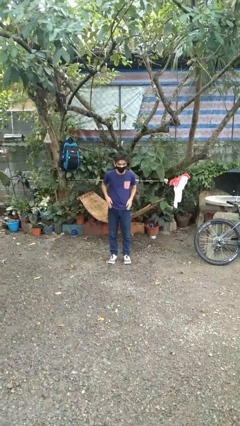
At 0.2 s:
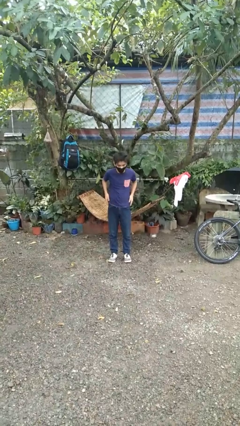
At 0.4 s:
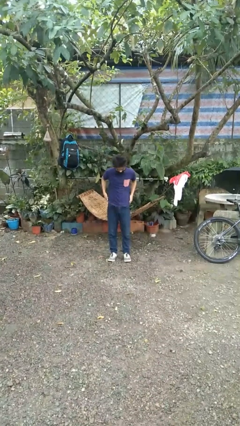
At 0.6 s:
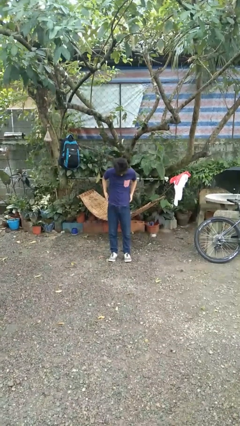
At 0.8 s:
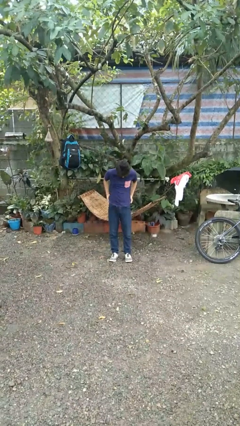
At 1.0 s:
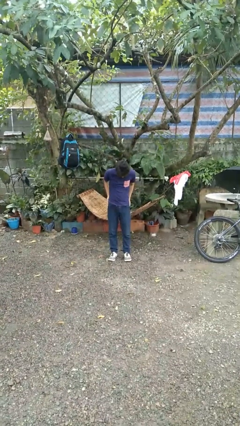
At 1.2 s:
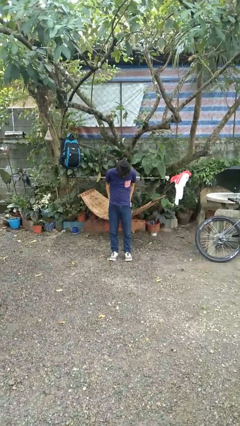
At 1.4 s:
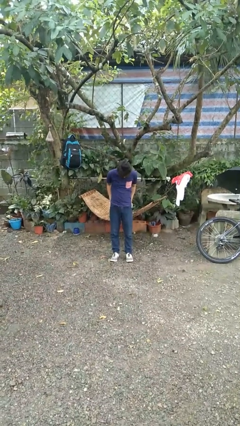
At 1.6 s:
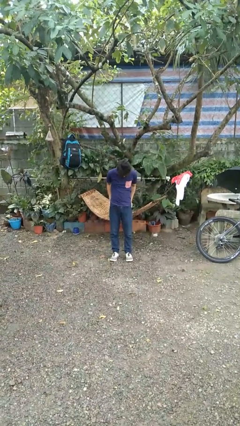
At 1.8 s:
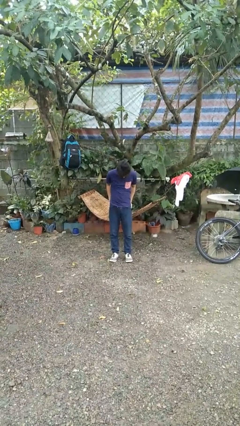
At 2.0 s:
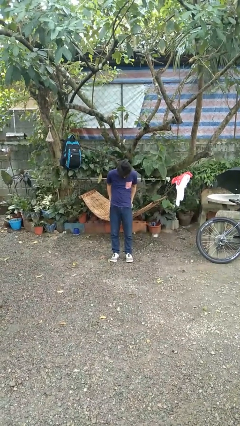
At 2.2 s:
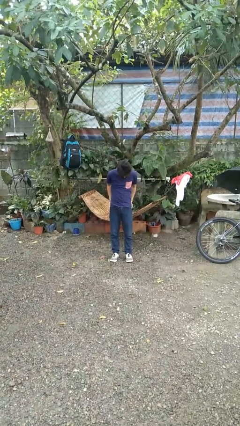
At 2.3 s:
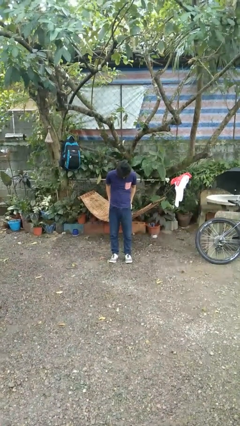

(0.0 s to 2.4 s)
person puts hands in back pockets

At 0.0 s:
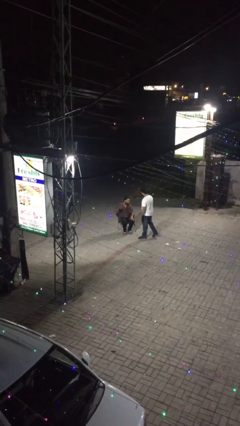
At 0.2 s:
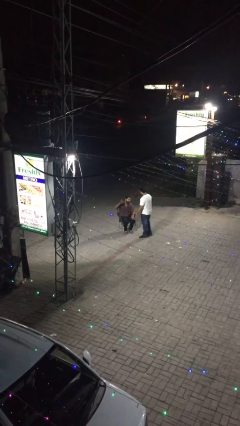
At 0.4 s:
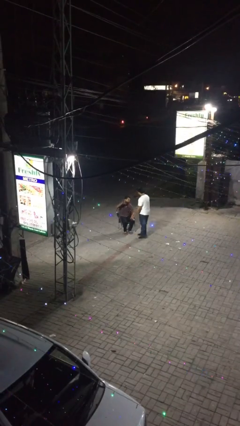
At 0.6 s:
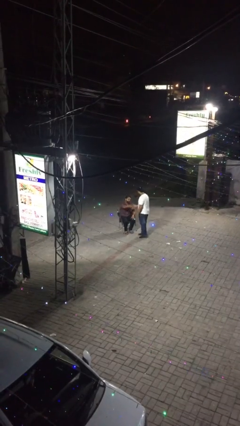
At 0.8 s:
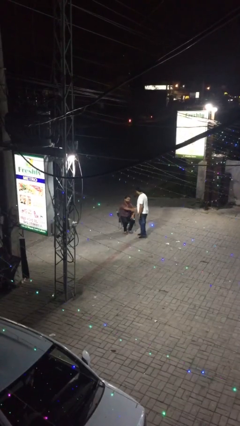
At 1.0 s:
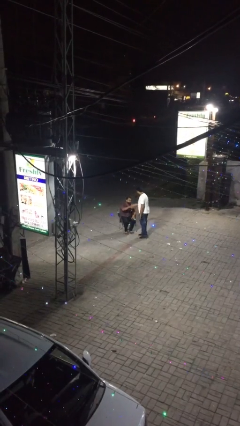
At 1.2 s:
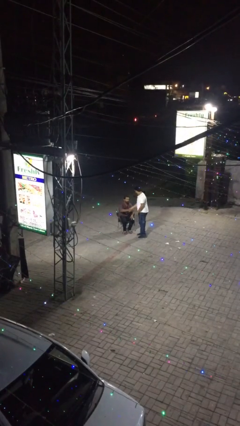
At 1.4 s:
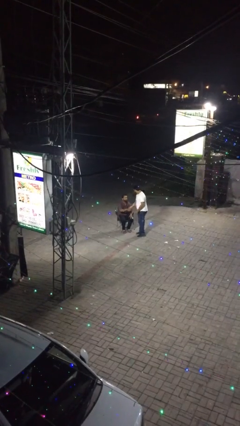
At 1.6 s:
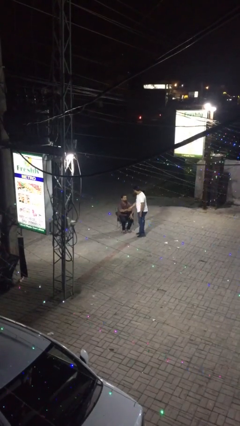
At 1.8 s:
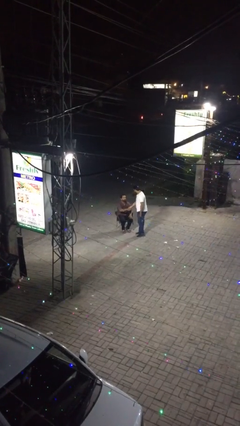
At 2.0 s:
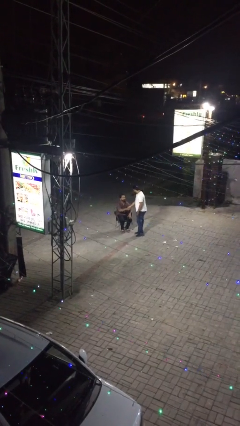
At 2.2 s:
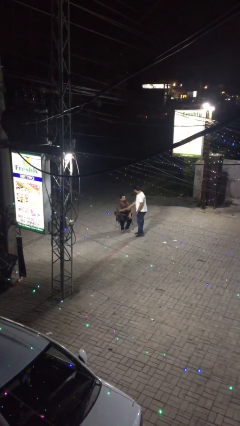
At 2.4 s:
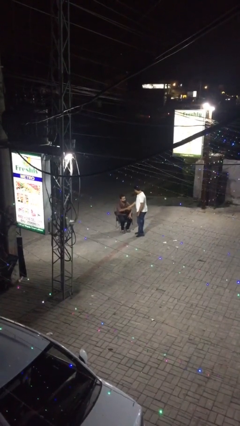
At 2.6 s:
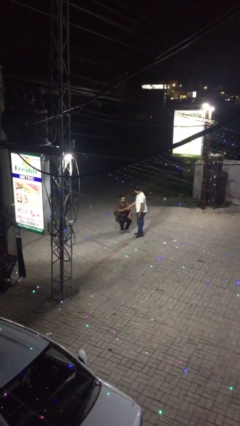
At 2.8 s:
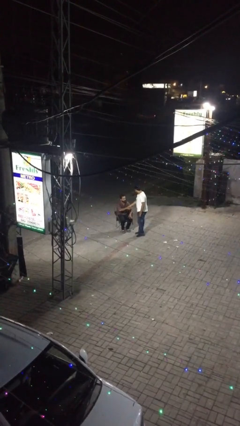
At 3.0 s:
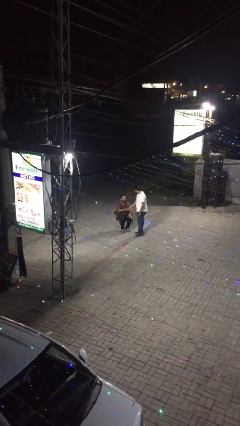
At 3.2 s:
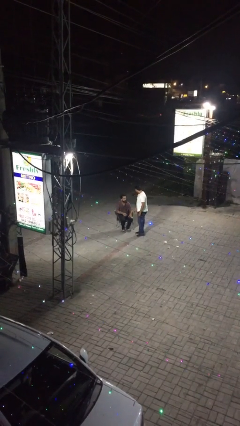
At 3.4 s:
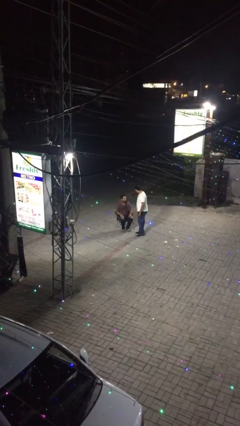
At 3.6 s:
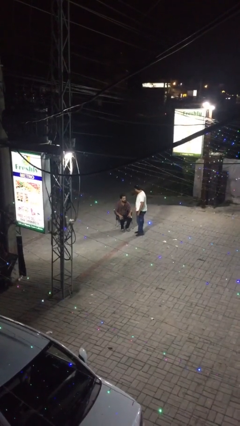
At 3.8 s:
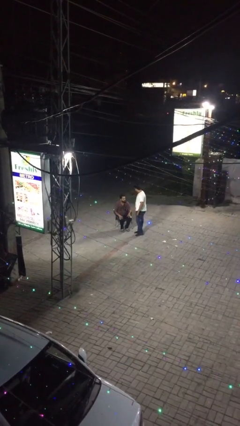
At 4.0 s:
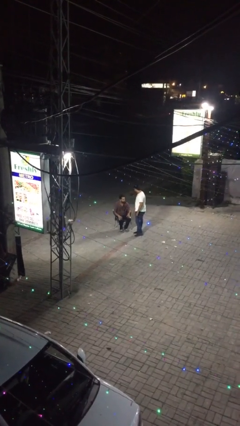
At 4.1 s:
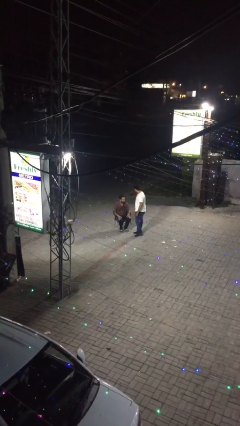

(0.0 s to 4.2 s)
person shakes hand

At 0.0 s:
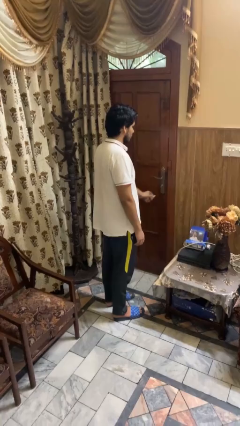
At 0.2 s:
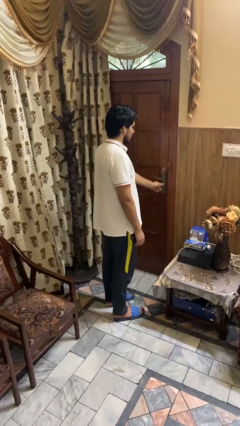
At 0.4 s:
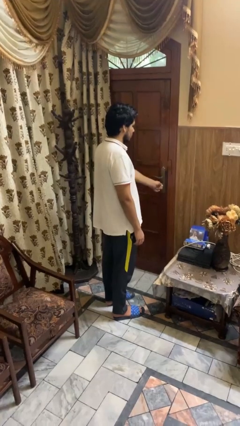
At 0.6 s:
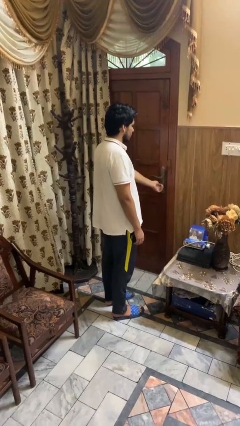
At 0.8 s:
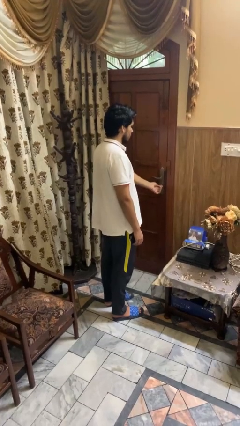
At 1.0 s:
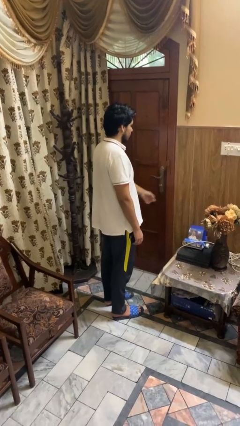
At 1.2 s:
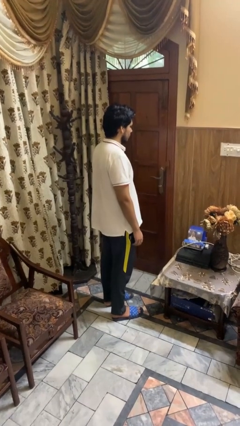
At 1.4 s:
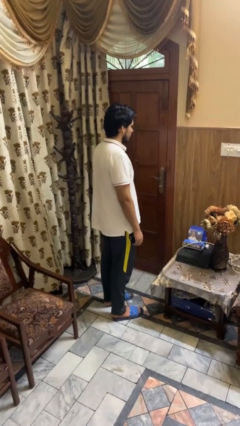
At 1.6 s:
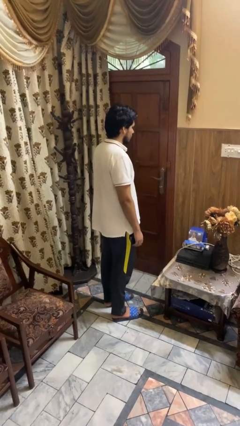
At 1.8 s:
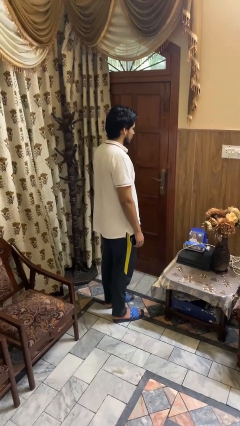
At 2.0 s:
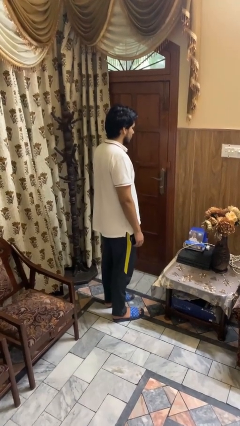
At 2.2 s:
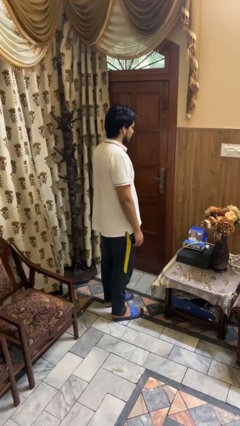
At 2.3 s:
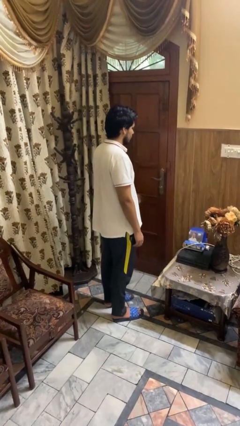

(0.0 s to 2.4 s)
person unlocks door with keys

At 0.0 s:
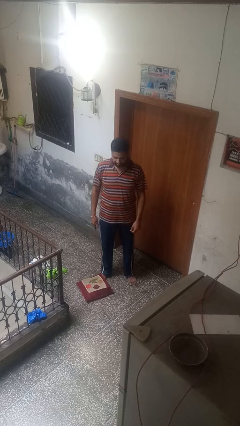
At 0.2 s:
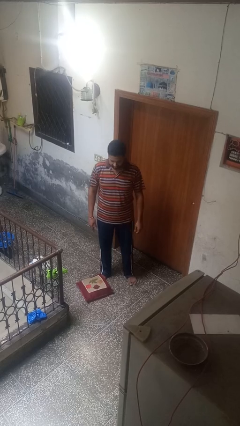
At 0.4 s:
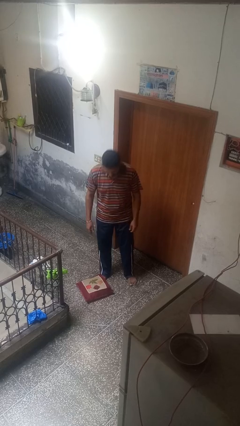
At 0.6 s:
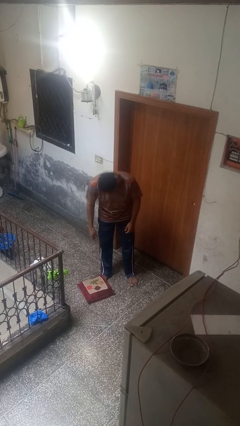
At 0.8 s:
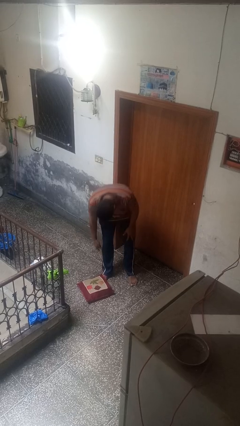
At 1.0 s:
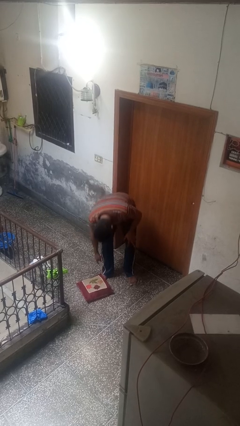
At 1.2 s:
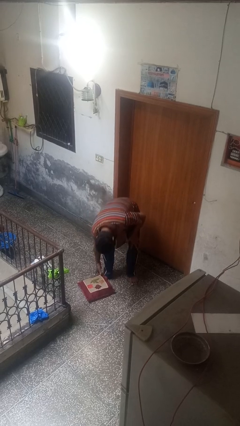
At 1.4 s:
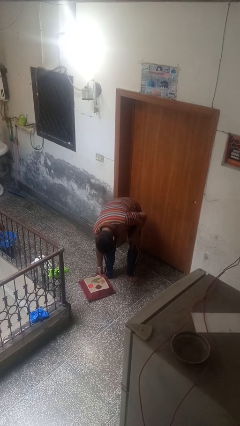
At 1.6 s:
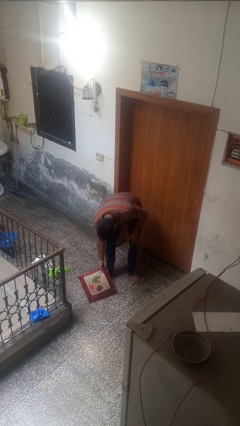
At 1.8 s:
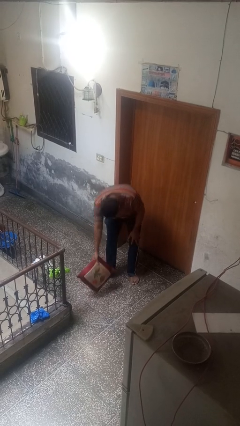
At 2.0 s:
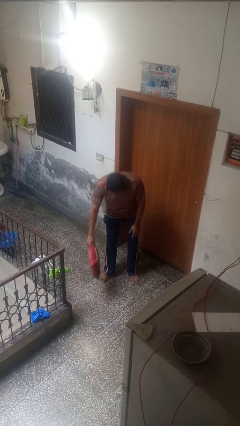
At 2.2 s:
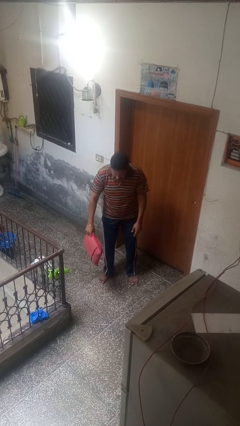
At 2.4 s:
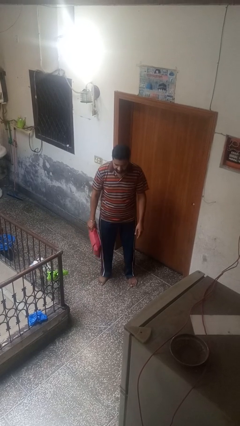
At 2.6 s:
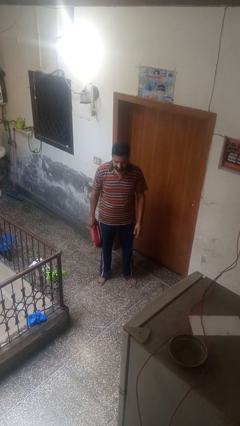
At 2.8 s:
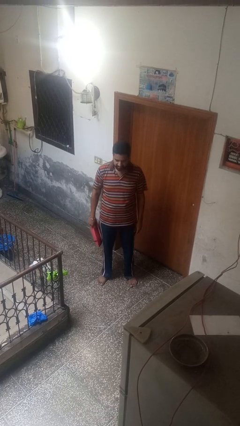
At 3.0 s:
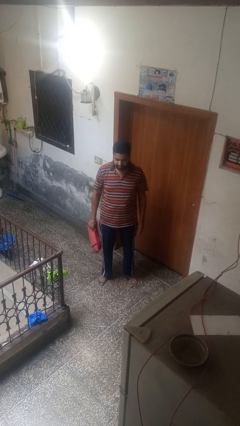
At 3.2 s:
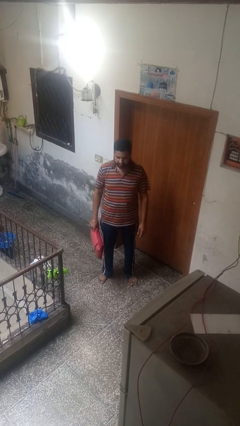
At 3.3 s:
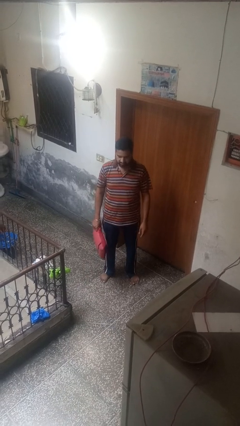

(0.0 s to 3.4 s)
person picks up object from floor

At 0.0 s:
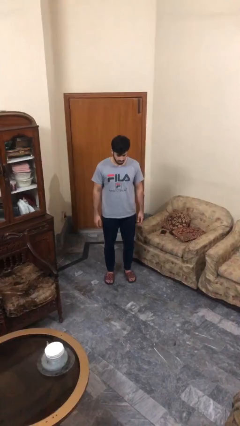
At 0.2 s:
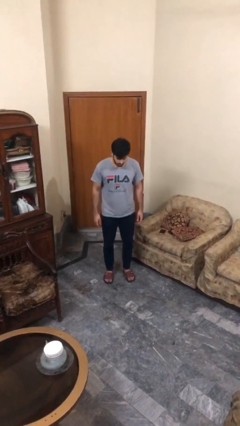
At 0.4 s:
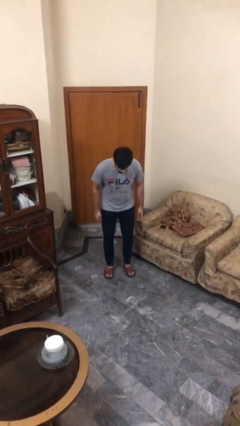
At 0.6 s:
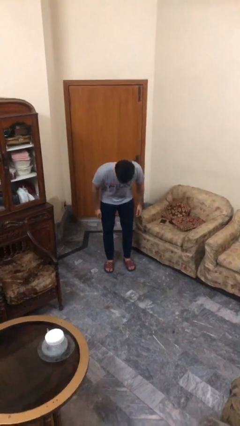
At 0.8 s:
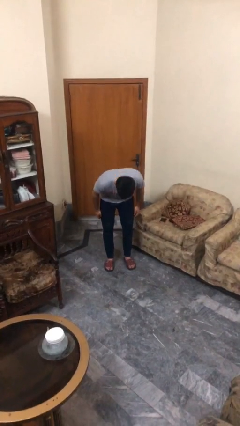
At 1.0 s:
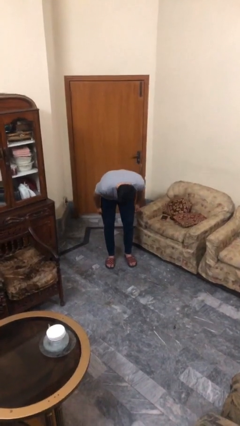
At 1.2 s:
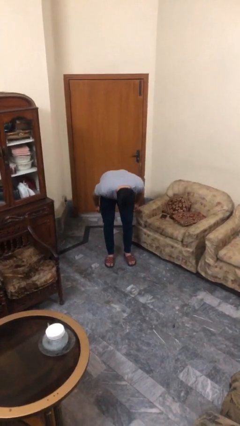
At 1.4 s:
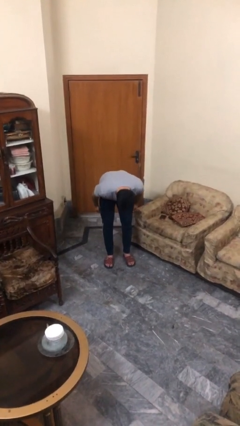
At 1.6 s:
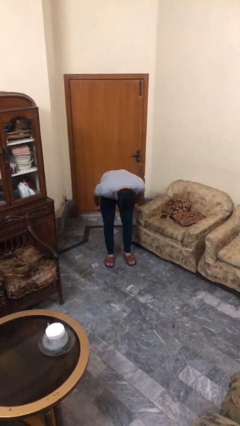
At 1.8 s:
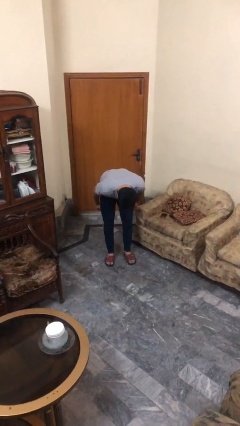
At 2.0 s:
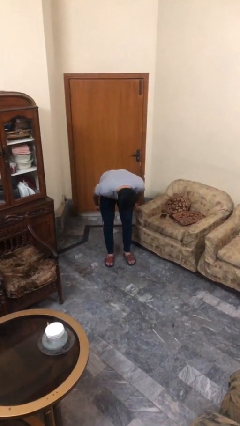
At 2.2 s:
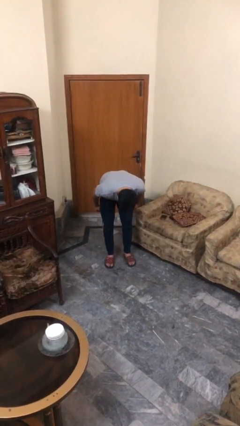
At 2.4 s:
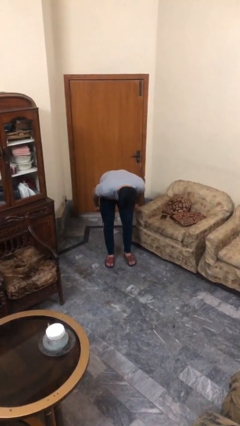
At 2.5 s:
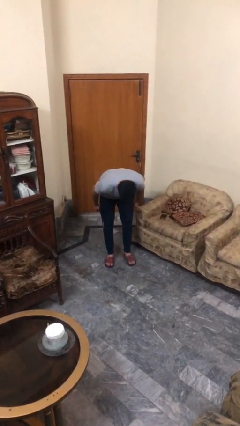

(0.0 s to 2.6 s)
person bows

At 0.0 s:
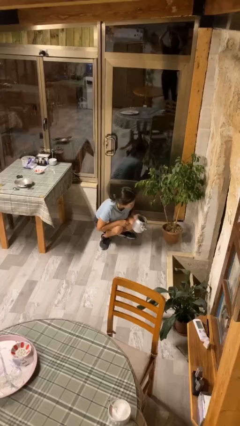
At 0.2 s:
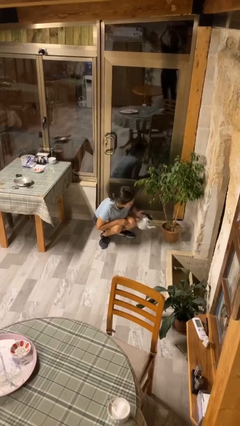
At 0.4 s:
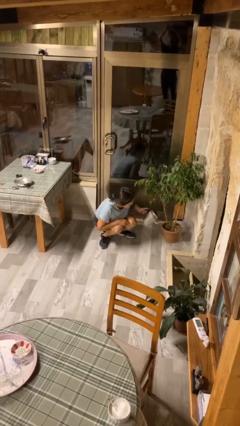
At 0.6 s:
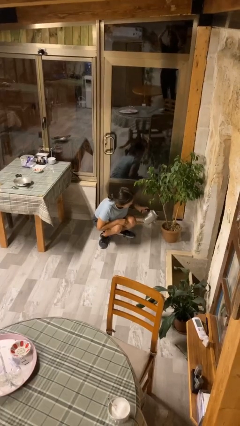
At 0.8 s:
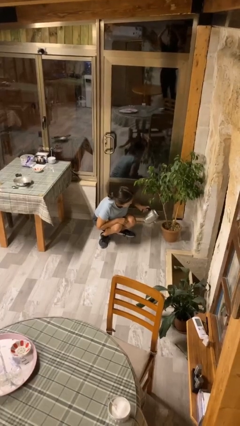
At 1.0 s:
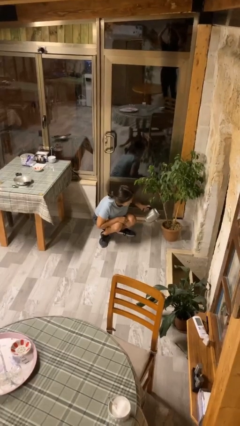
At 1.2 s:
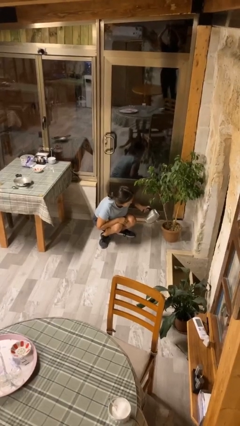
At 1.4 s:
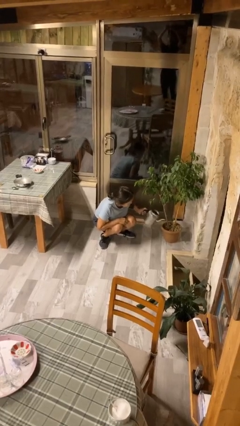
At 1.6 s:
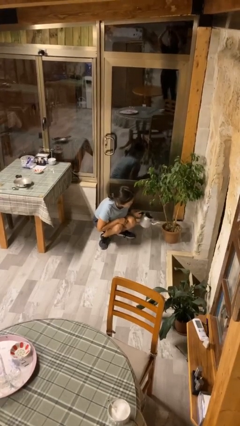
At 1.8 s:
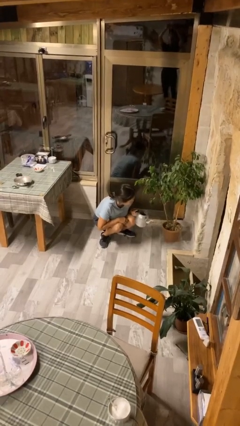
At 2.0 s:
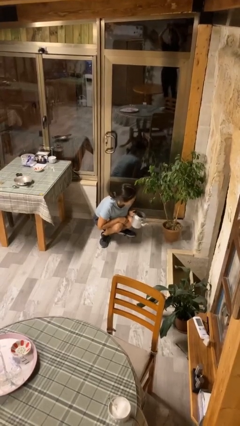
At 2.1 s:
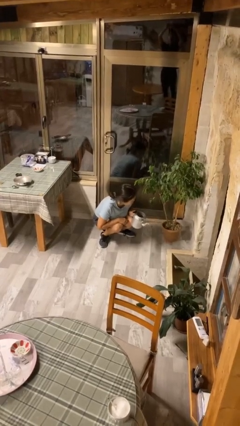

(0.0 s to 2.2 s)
person waters houseplant

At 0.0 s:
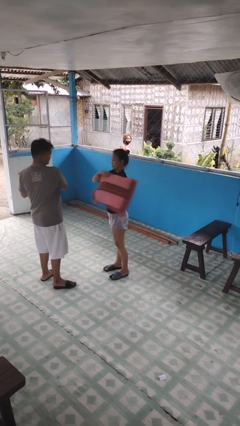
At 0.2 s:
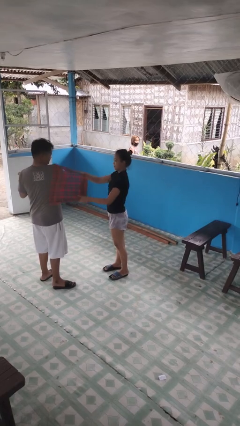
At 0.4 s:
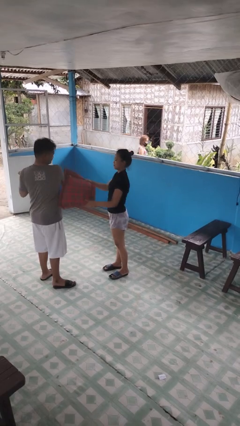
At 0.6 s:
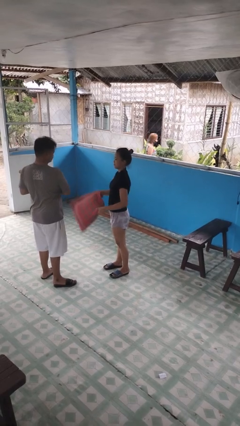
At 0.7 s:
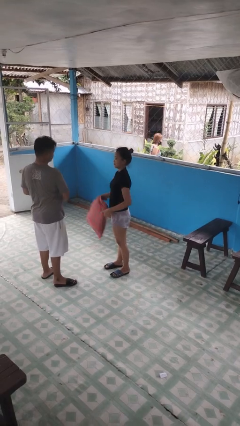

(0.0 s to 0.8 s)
person hits person with pillow
